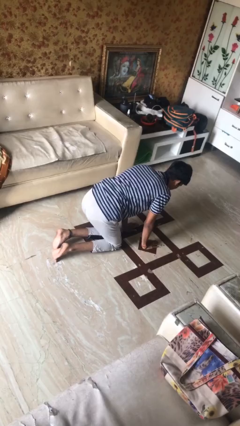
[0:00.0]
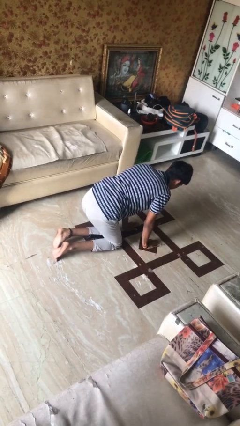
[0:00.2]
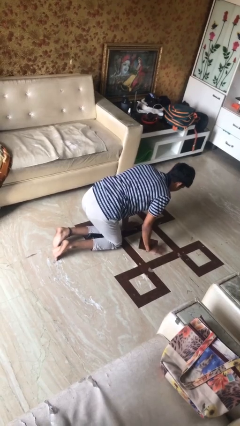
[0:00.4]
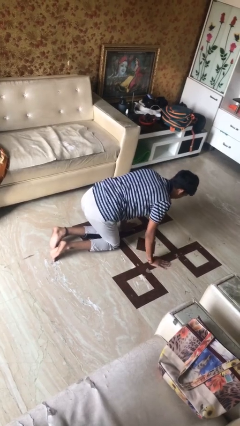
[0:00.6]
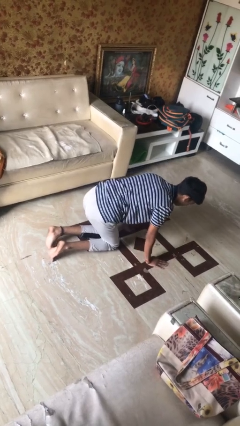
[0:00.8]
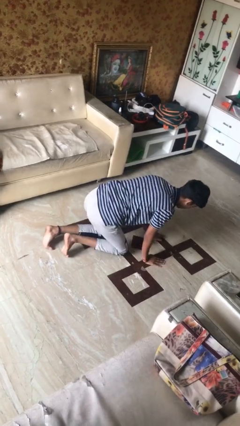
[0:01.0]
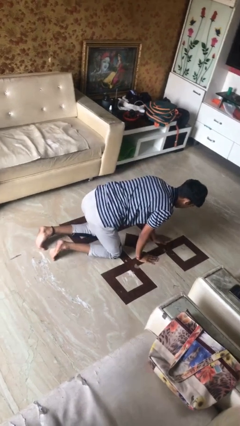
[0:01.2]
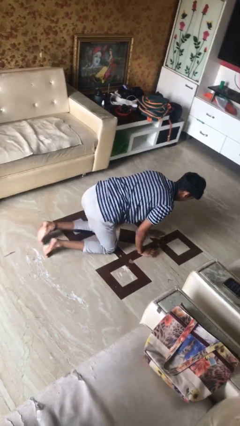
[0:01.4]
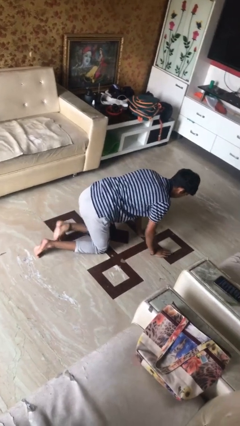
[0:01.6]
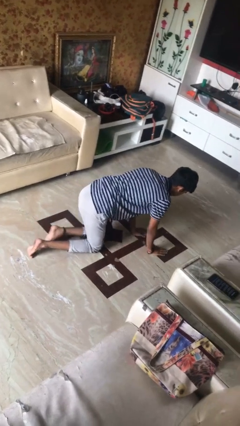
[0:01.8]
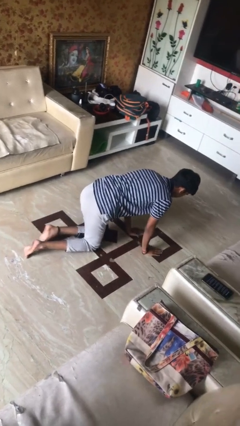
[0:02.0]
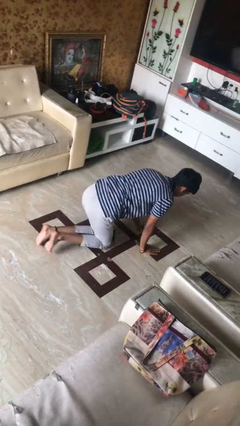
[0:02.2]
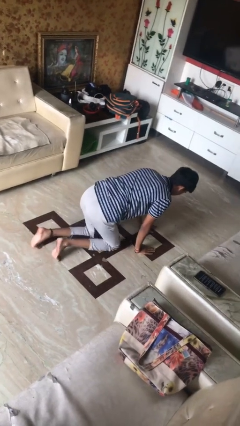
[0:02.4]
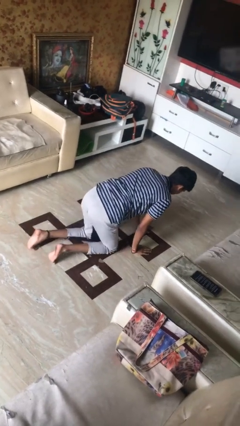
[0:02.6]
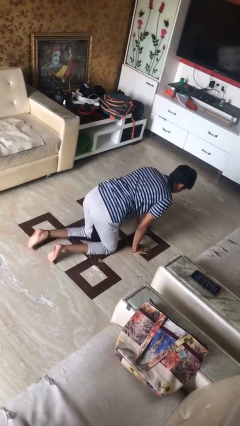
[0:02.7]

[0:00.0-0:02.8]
person crawls

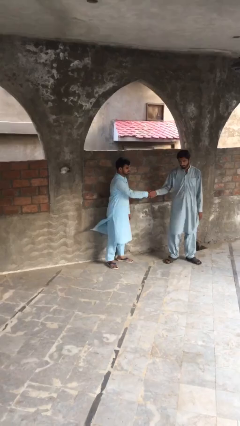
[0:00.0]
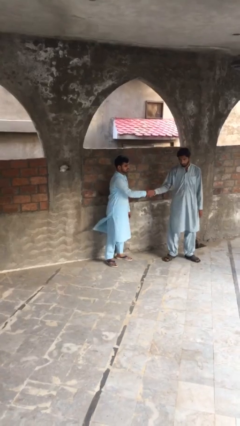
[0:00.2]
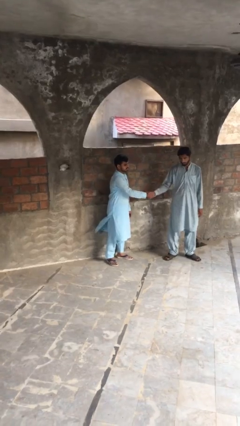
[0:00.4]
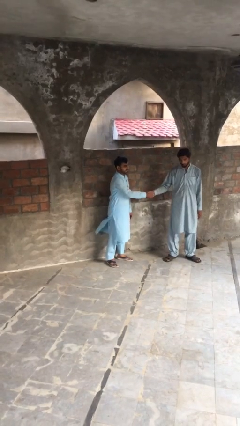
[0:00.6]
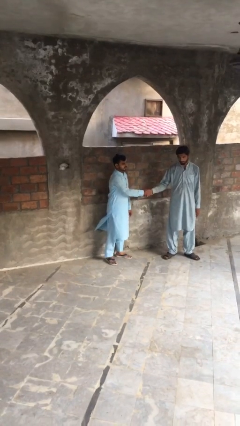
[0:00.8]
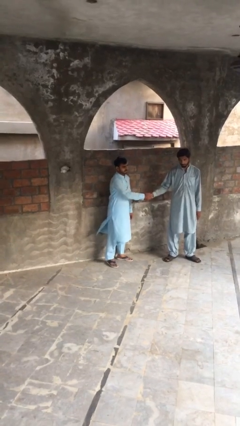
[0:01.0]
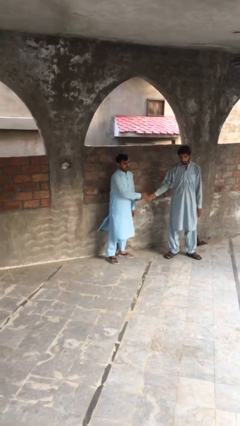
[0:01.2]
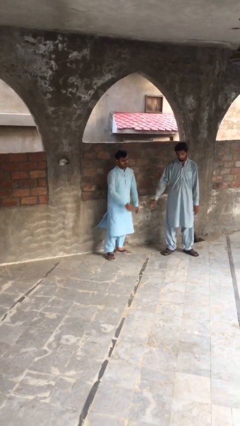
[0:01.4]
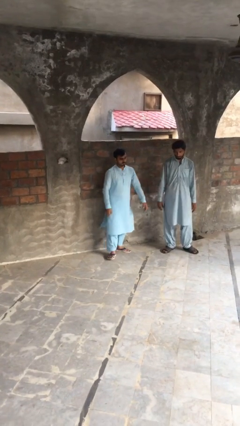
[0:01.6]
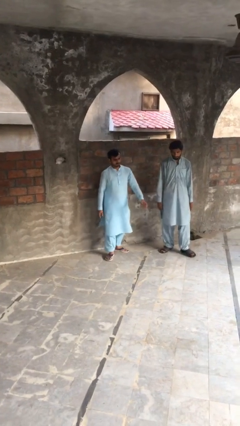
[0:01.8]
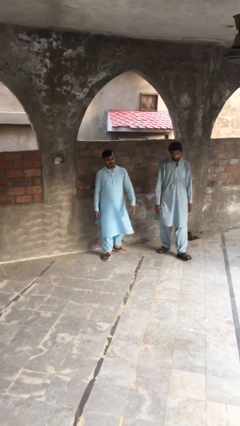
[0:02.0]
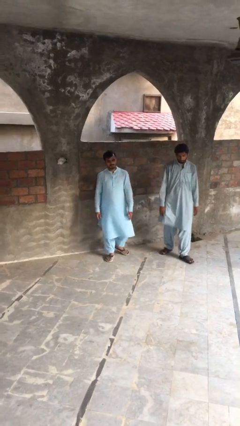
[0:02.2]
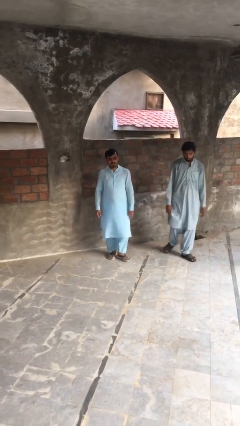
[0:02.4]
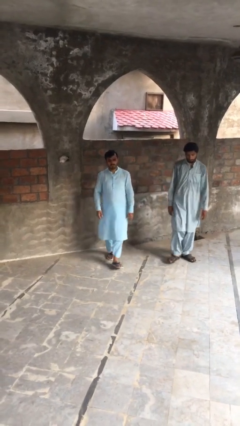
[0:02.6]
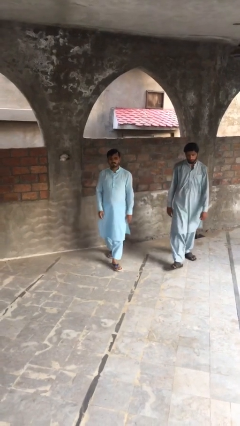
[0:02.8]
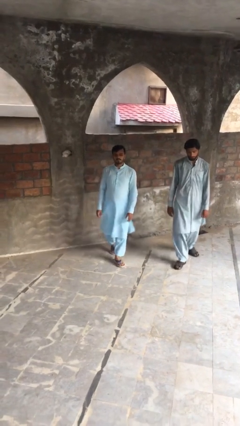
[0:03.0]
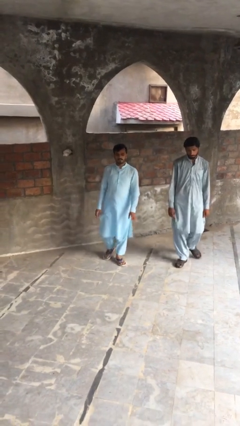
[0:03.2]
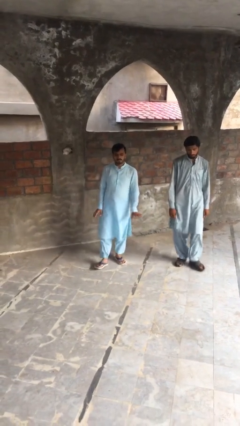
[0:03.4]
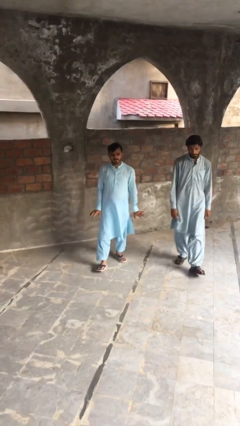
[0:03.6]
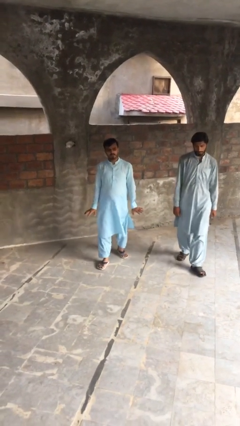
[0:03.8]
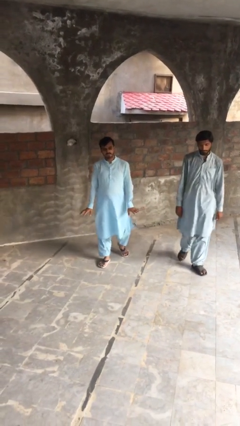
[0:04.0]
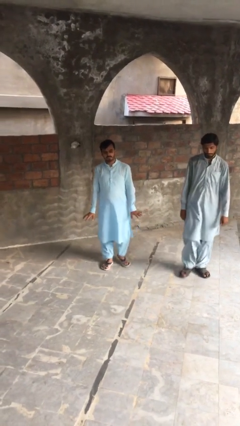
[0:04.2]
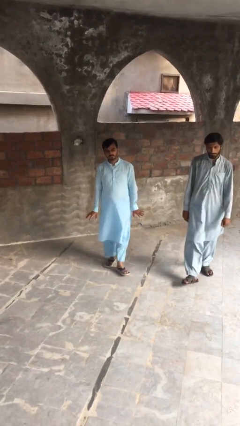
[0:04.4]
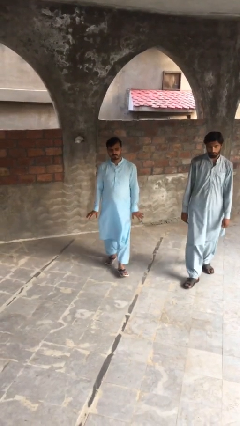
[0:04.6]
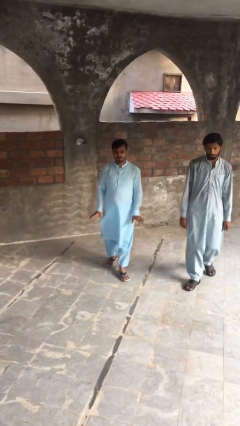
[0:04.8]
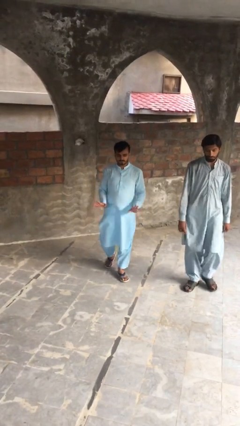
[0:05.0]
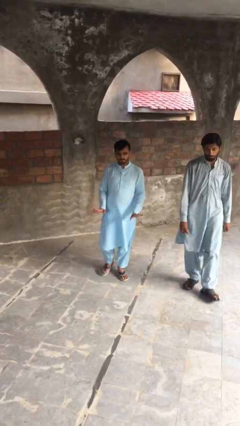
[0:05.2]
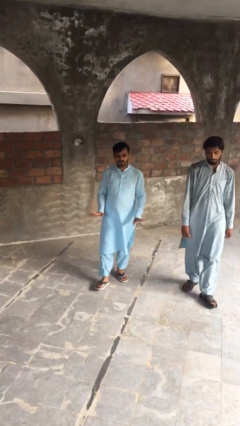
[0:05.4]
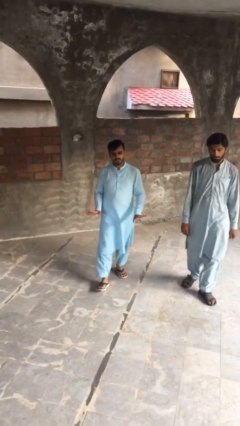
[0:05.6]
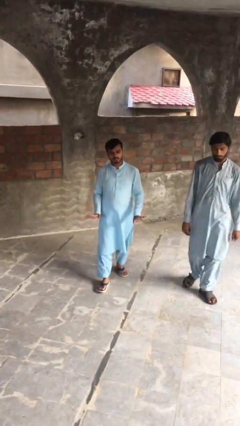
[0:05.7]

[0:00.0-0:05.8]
person talks to person

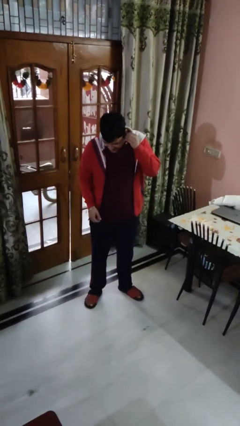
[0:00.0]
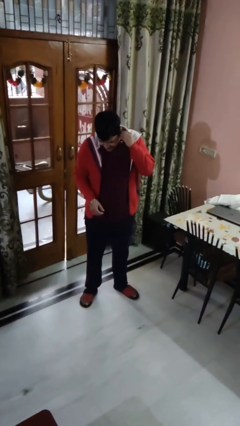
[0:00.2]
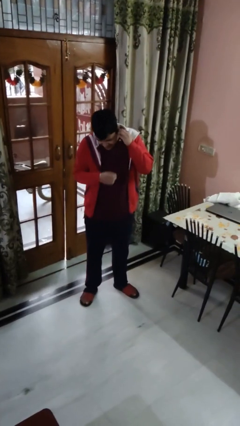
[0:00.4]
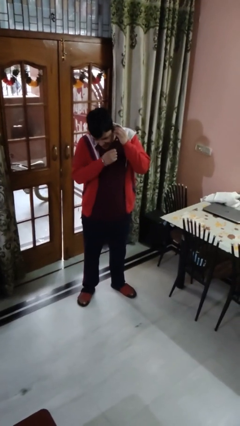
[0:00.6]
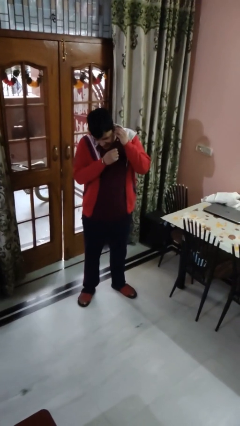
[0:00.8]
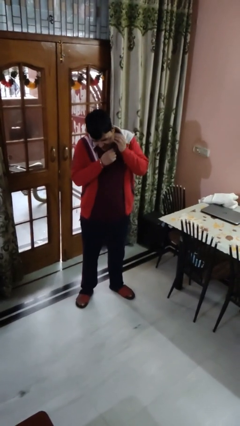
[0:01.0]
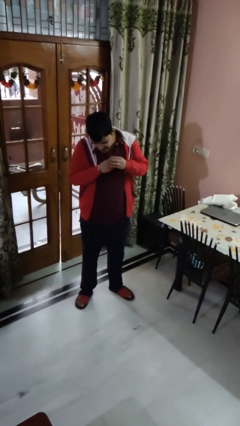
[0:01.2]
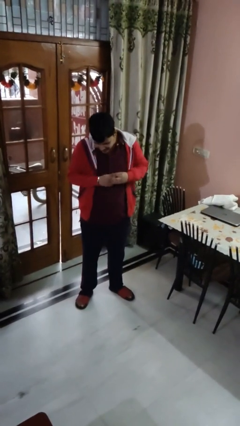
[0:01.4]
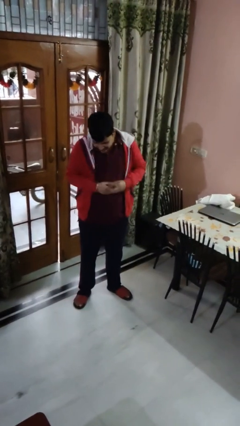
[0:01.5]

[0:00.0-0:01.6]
person puts on earrings

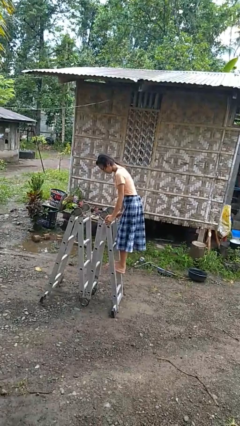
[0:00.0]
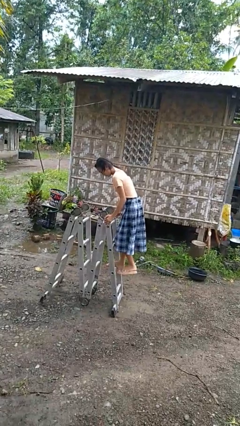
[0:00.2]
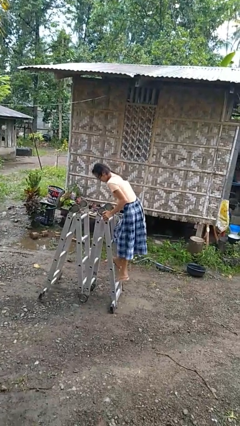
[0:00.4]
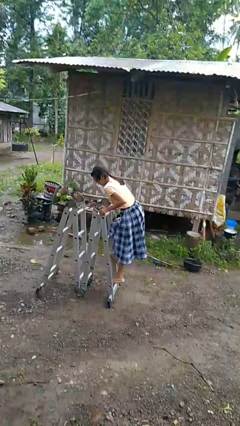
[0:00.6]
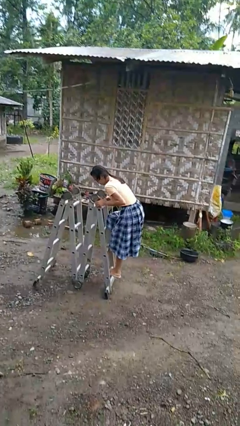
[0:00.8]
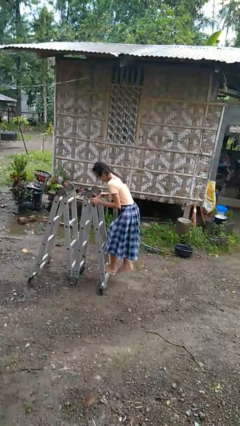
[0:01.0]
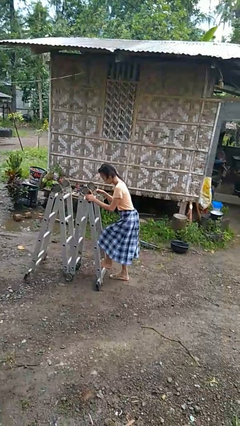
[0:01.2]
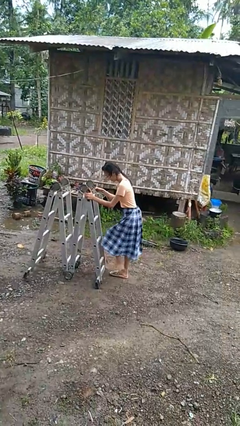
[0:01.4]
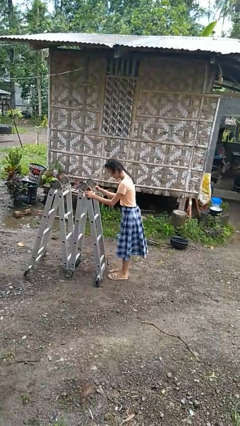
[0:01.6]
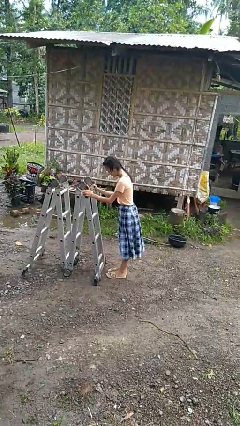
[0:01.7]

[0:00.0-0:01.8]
person climbs down ladder

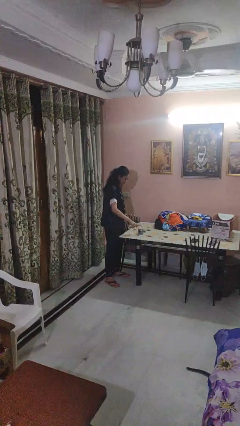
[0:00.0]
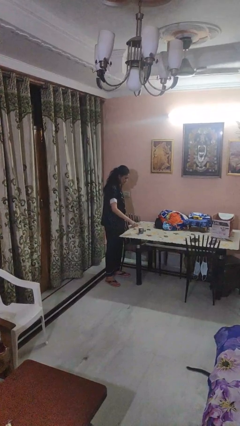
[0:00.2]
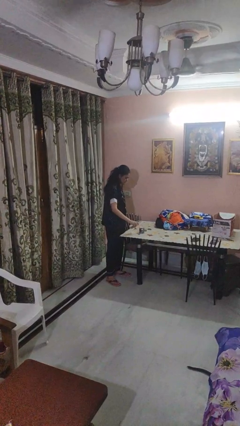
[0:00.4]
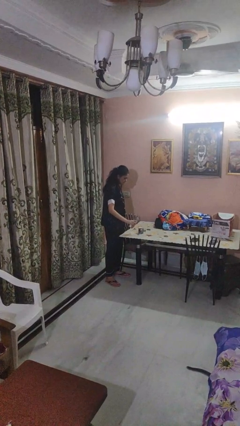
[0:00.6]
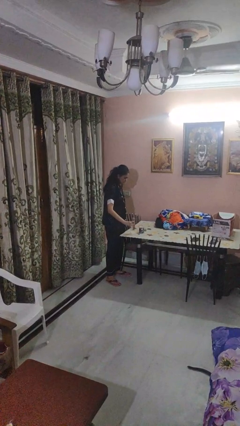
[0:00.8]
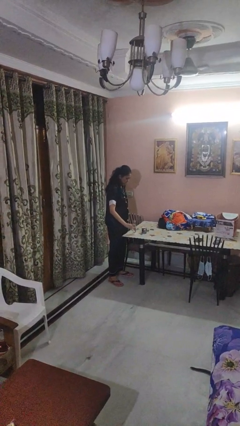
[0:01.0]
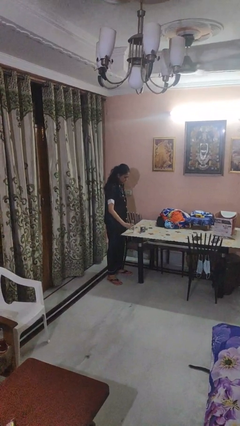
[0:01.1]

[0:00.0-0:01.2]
person pours liquid into cup

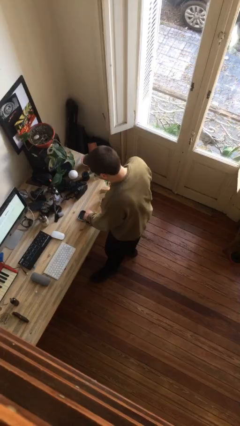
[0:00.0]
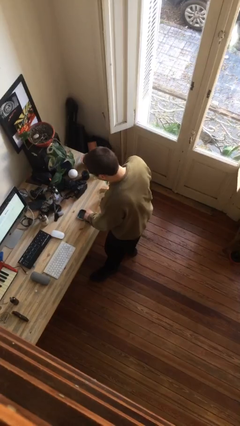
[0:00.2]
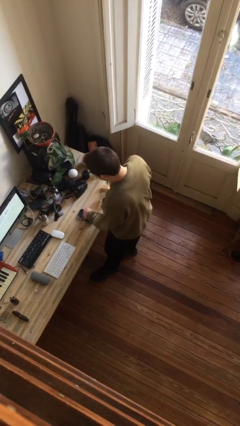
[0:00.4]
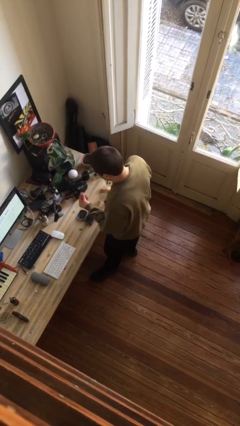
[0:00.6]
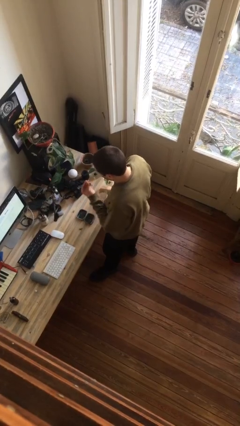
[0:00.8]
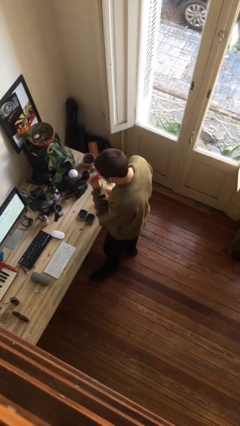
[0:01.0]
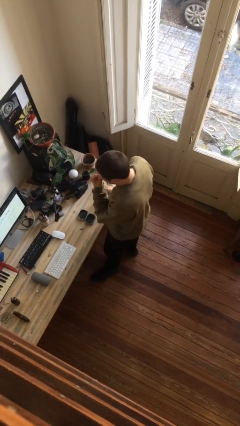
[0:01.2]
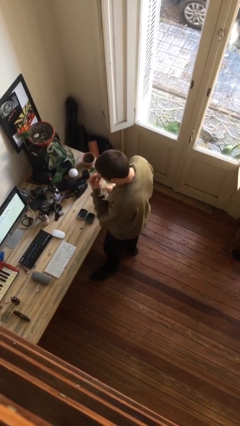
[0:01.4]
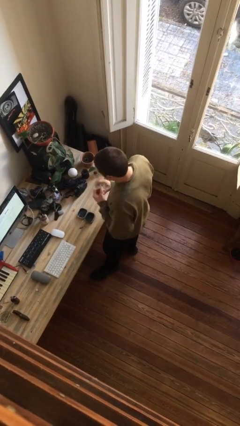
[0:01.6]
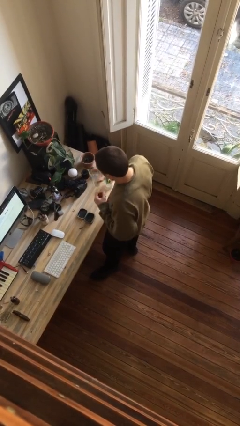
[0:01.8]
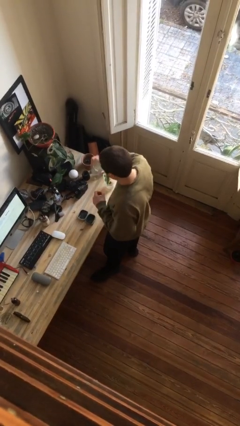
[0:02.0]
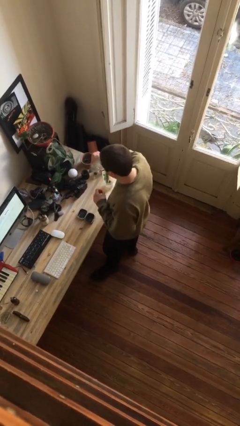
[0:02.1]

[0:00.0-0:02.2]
person takes medicine pills

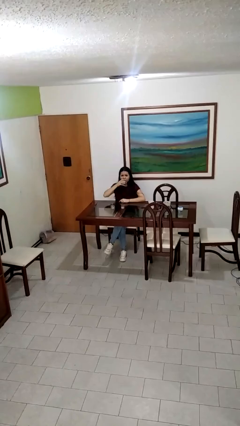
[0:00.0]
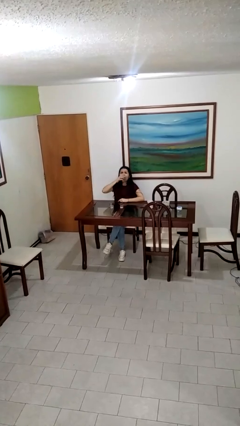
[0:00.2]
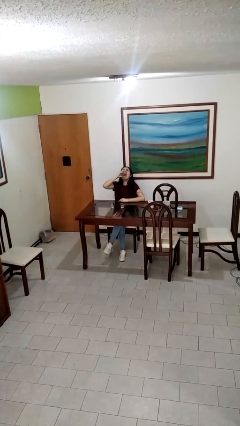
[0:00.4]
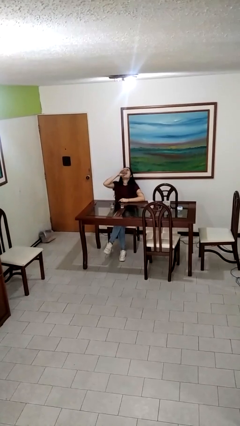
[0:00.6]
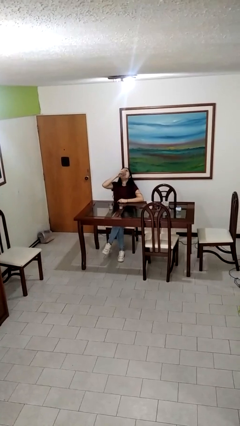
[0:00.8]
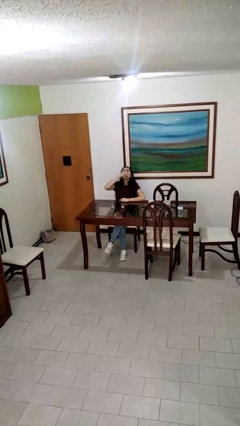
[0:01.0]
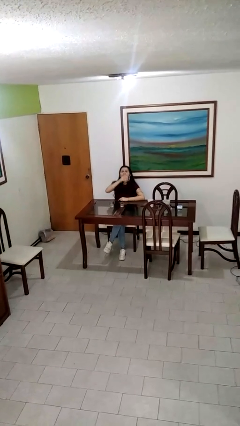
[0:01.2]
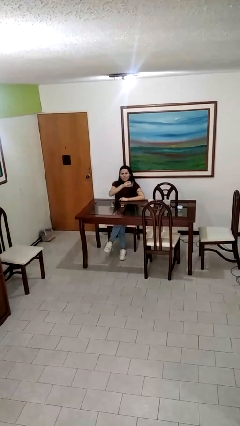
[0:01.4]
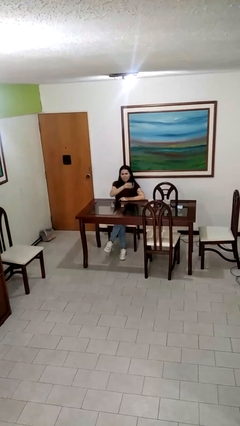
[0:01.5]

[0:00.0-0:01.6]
person drinks from shotglass

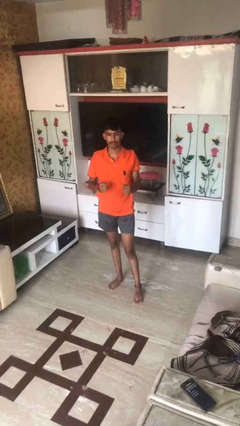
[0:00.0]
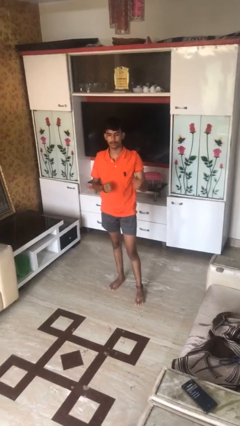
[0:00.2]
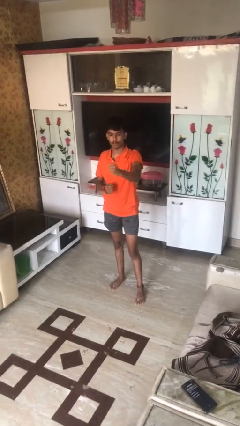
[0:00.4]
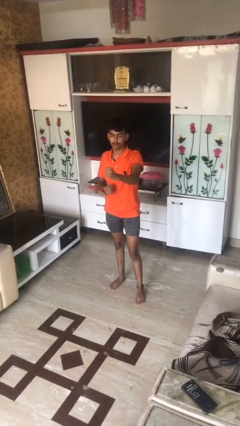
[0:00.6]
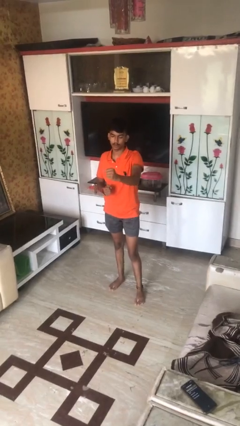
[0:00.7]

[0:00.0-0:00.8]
person punches
